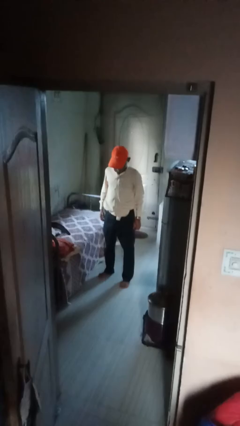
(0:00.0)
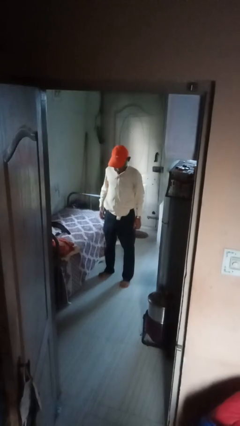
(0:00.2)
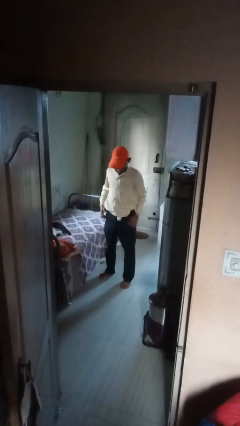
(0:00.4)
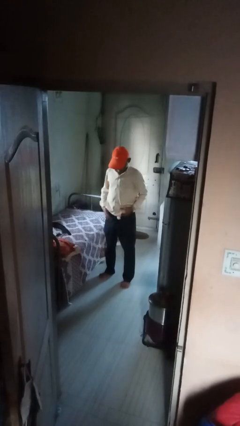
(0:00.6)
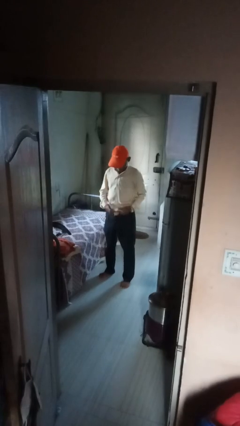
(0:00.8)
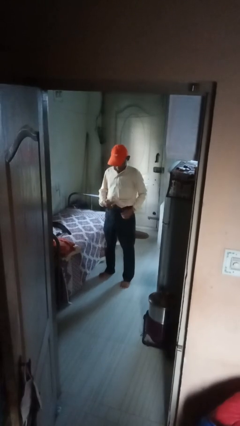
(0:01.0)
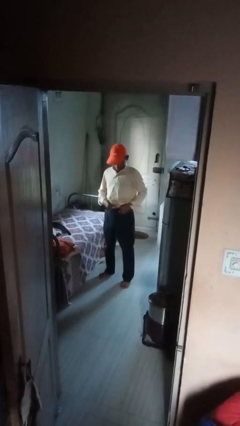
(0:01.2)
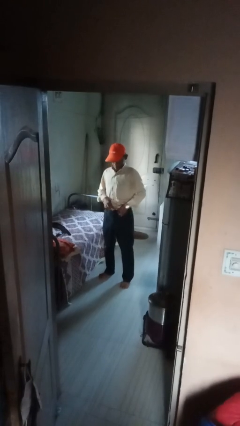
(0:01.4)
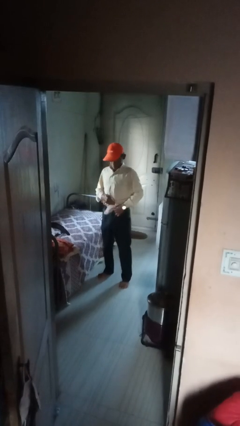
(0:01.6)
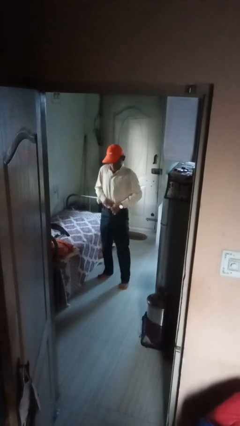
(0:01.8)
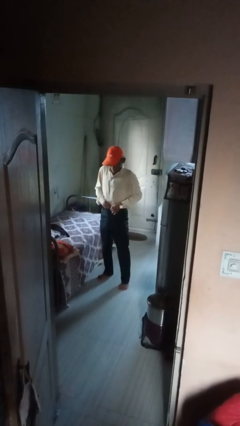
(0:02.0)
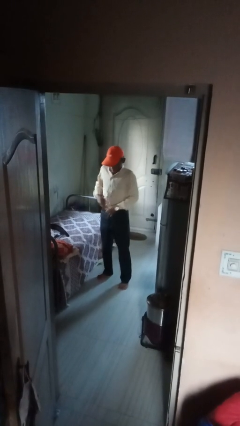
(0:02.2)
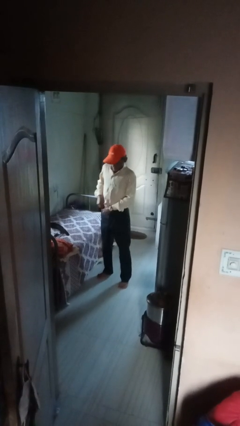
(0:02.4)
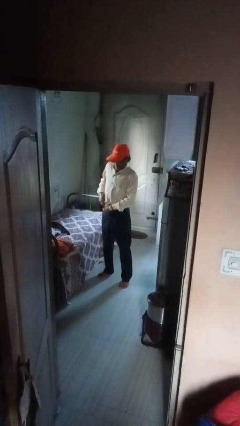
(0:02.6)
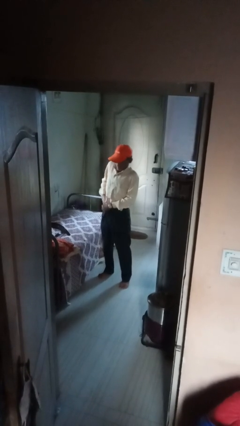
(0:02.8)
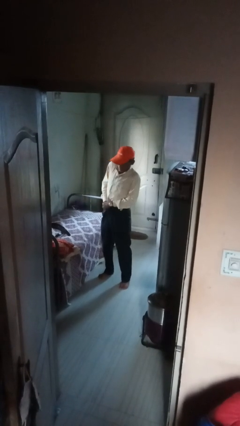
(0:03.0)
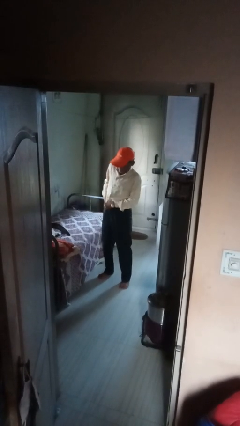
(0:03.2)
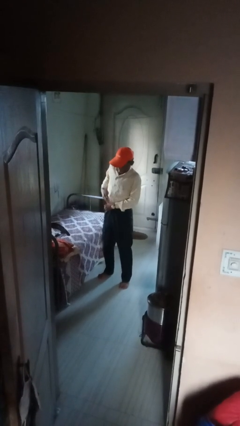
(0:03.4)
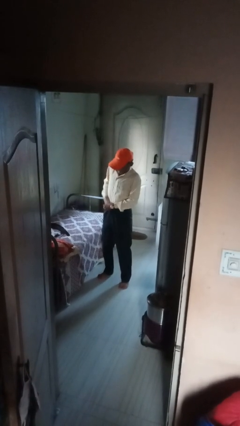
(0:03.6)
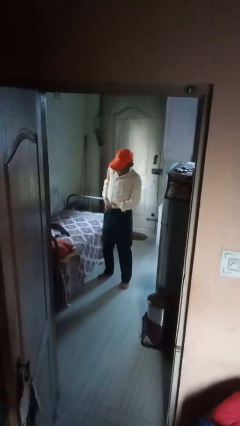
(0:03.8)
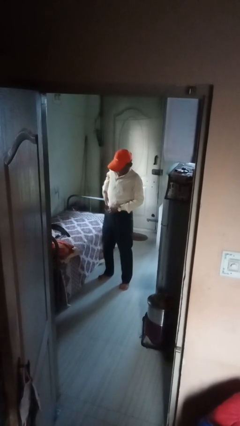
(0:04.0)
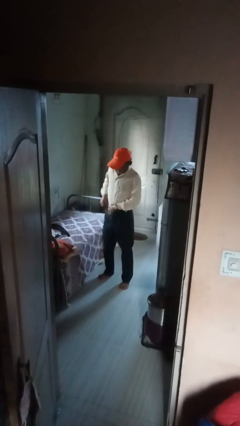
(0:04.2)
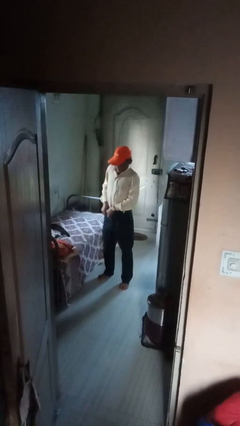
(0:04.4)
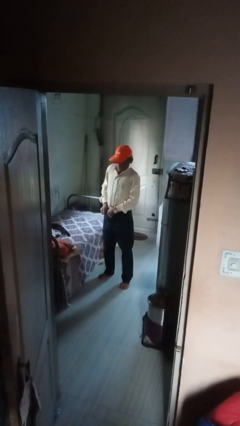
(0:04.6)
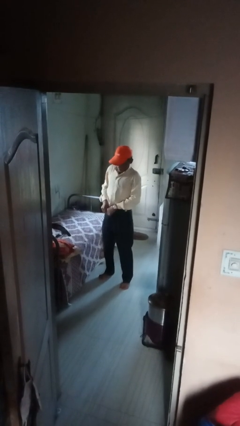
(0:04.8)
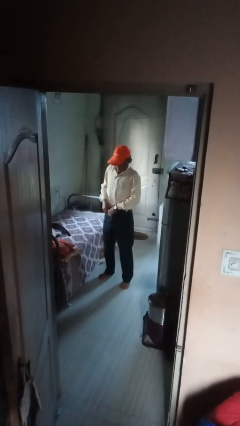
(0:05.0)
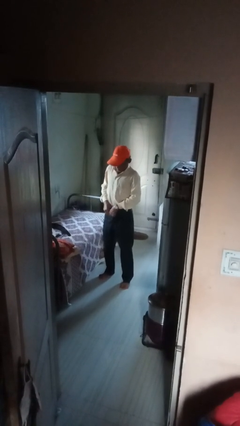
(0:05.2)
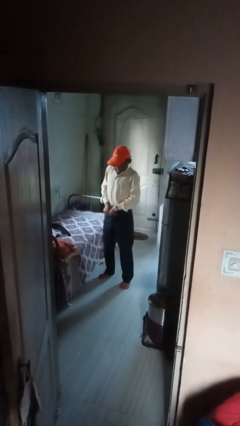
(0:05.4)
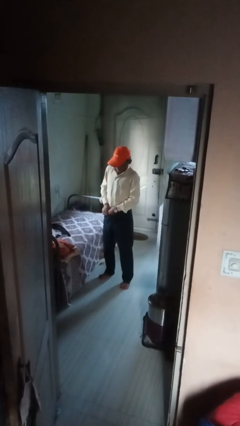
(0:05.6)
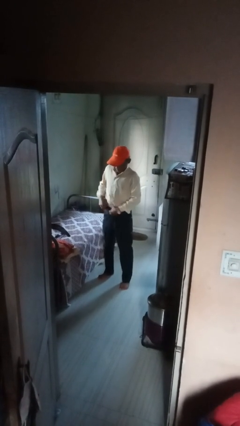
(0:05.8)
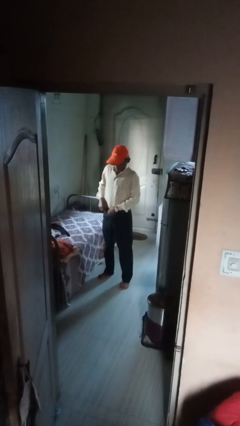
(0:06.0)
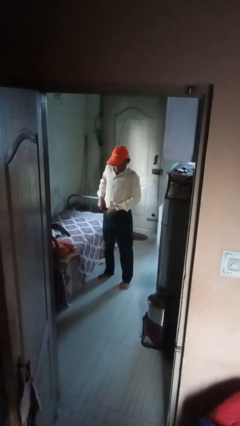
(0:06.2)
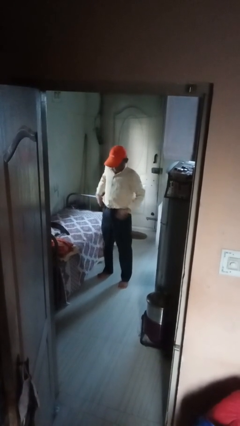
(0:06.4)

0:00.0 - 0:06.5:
person tucks in shirt

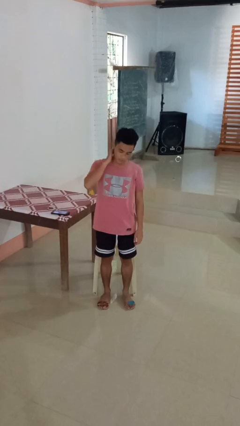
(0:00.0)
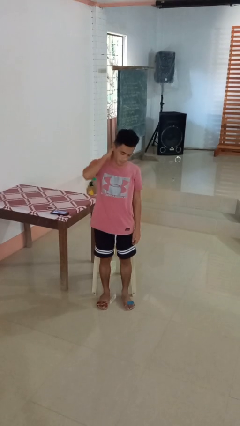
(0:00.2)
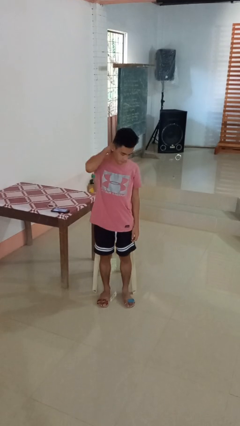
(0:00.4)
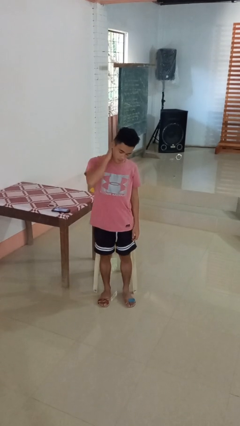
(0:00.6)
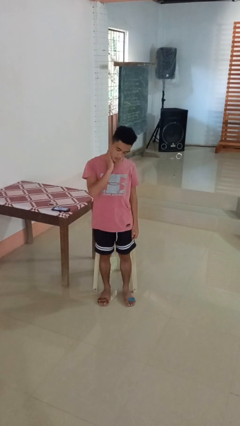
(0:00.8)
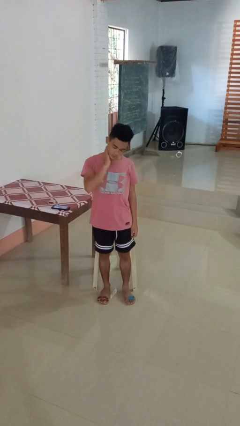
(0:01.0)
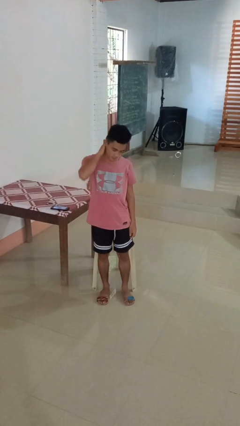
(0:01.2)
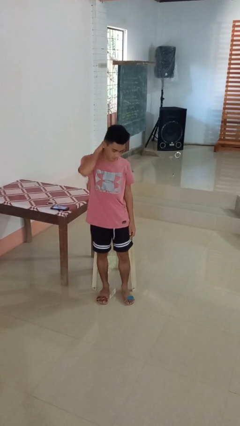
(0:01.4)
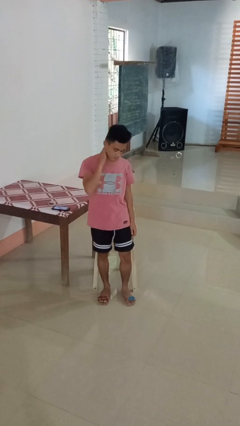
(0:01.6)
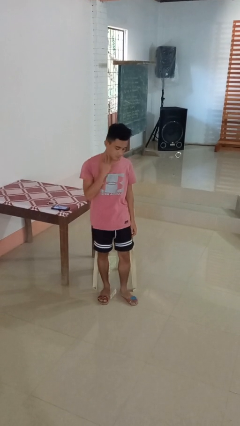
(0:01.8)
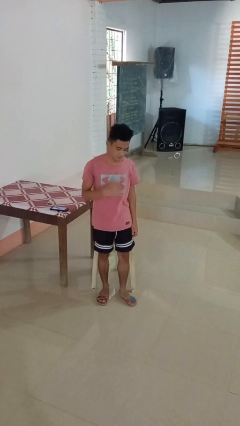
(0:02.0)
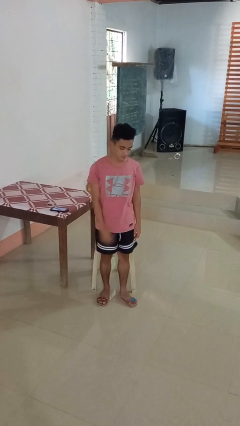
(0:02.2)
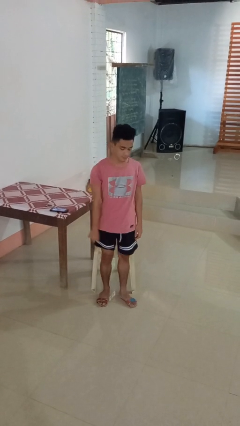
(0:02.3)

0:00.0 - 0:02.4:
person rubs neck

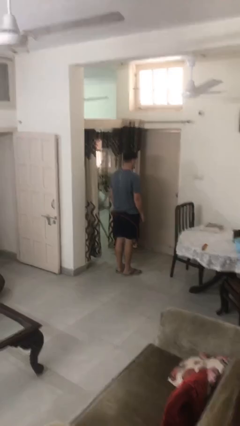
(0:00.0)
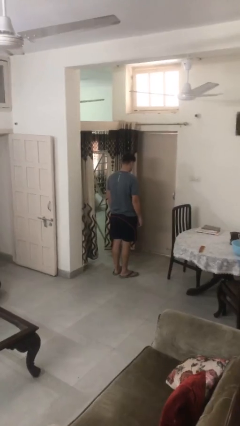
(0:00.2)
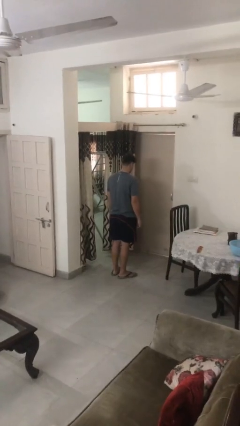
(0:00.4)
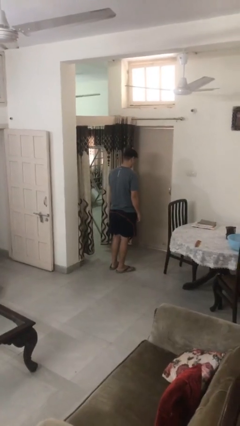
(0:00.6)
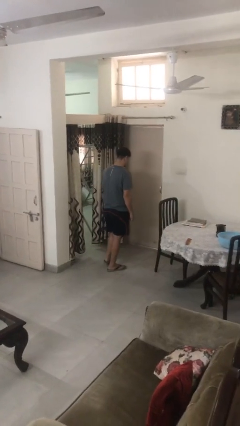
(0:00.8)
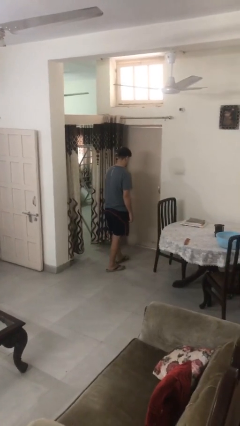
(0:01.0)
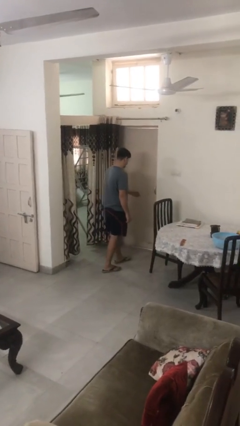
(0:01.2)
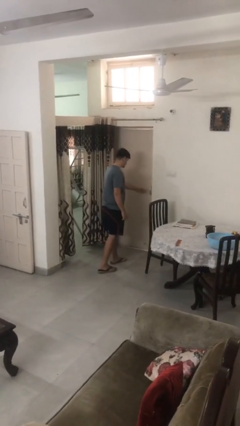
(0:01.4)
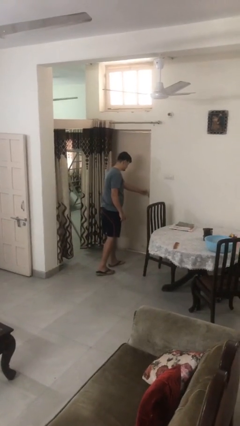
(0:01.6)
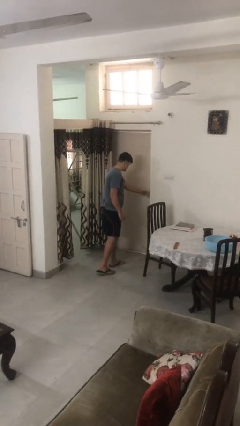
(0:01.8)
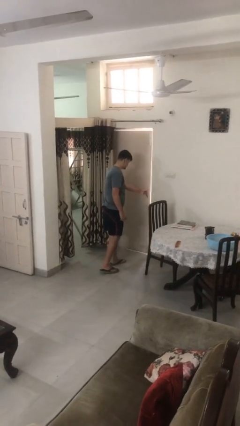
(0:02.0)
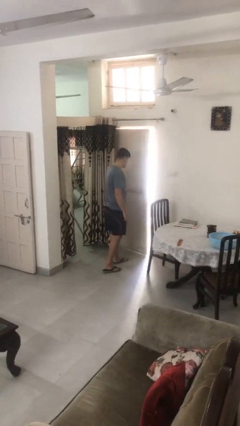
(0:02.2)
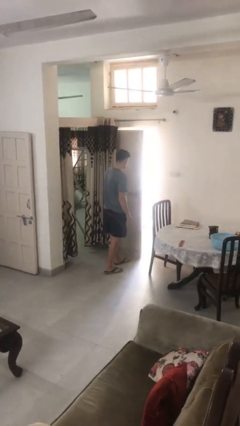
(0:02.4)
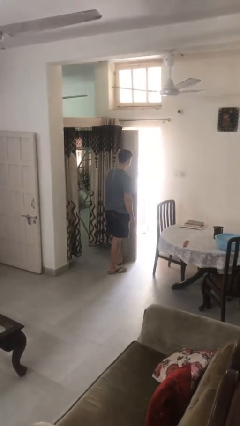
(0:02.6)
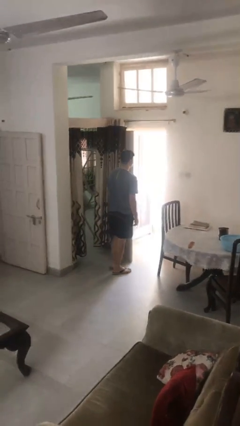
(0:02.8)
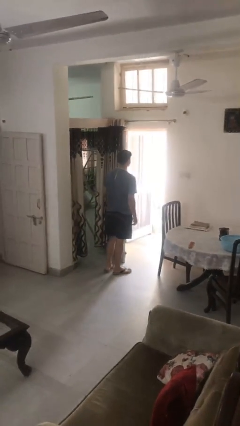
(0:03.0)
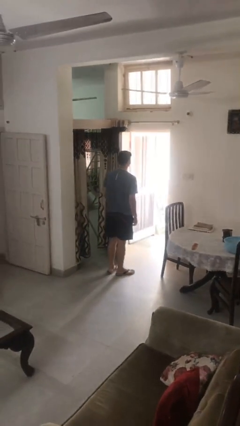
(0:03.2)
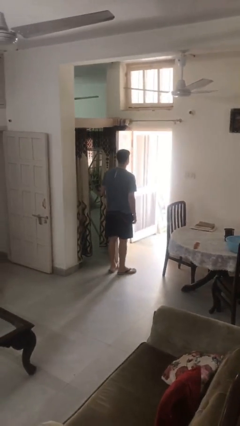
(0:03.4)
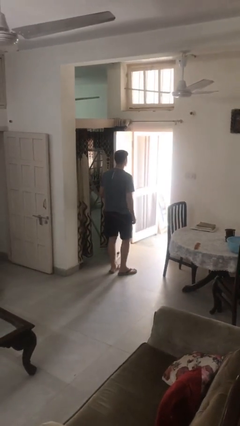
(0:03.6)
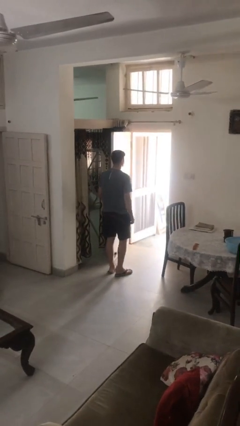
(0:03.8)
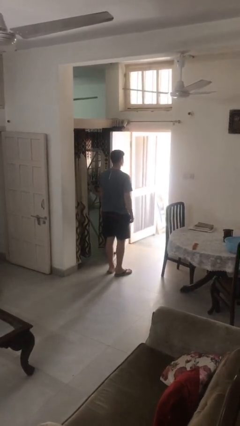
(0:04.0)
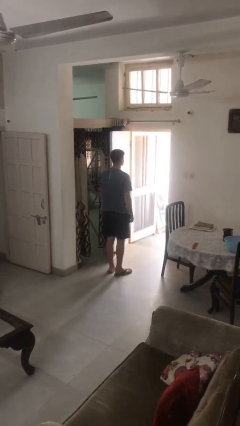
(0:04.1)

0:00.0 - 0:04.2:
person opens facility door

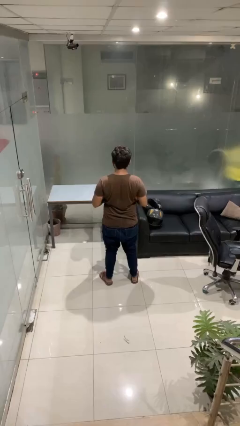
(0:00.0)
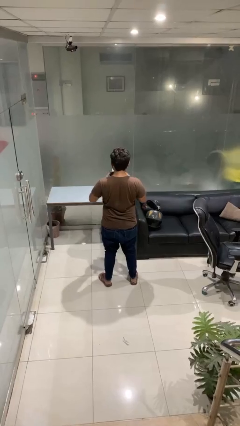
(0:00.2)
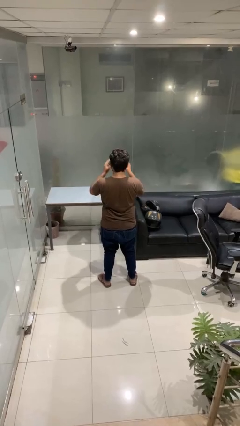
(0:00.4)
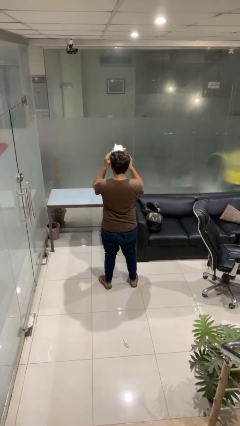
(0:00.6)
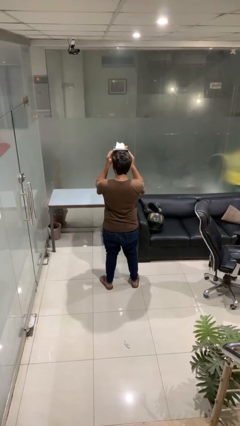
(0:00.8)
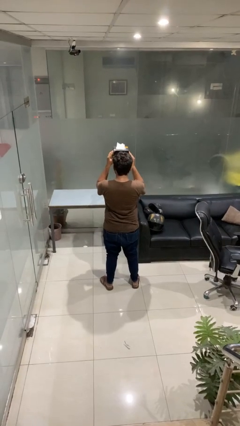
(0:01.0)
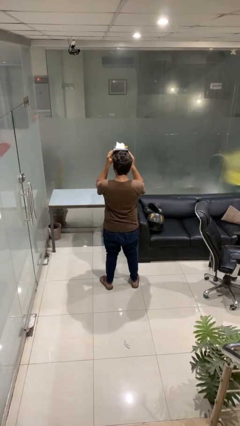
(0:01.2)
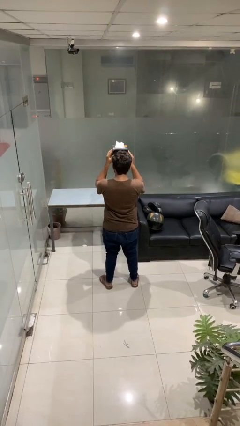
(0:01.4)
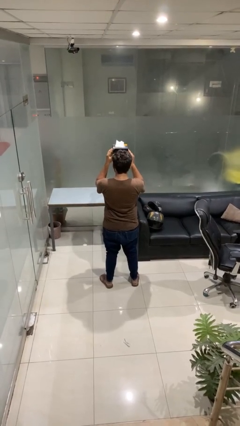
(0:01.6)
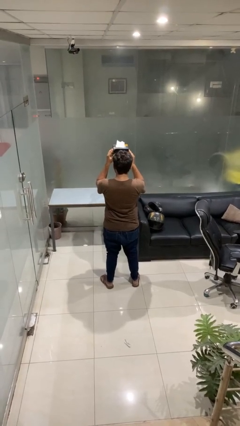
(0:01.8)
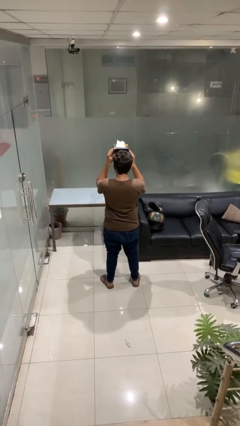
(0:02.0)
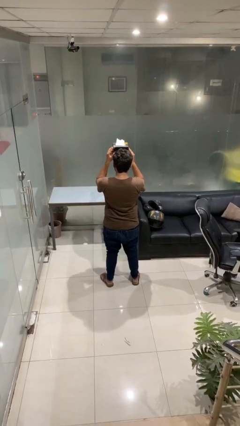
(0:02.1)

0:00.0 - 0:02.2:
person holds object above head

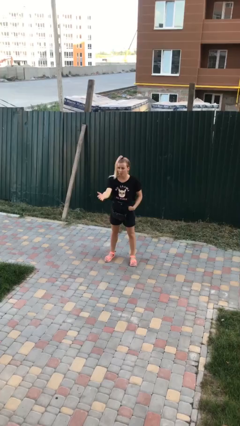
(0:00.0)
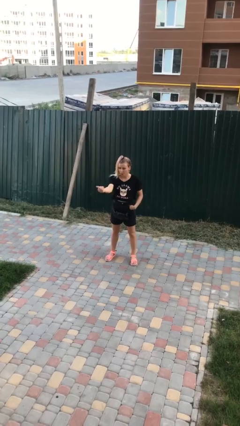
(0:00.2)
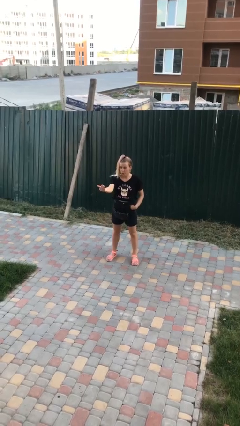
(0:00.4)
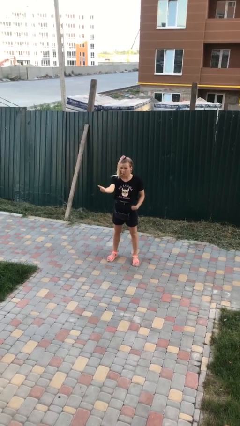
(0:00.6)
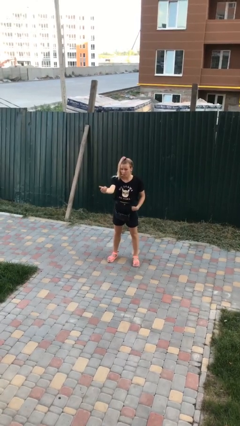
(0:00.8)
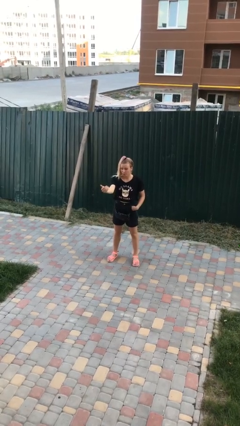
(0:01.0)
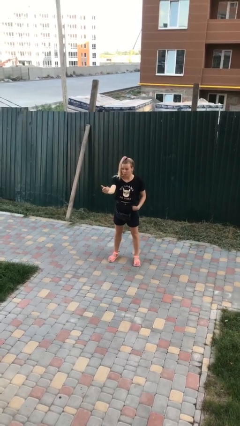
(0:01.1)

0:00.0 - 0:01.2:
person gestures come here

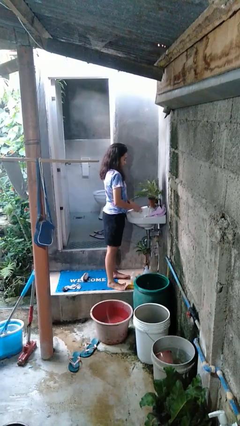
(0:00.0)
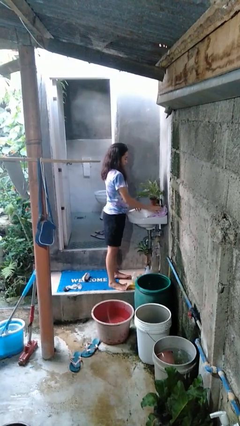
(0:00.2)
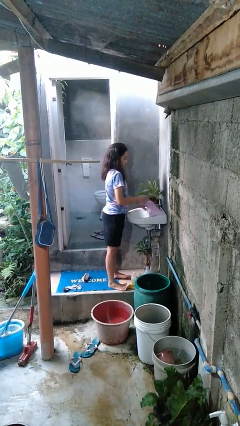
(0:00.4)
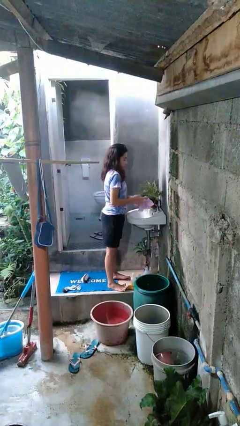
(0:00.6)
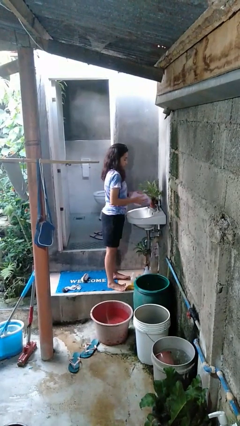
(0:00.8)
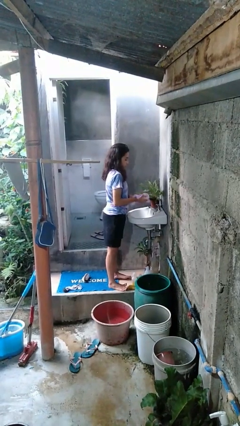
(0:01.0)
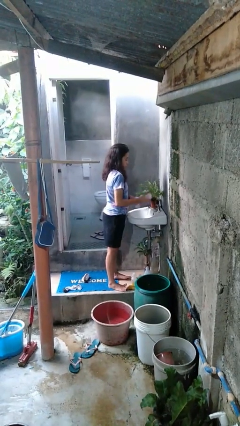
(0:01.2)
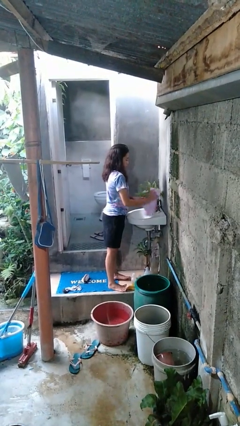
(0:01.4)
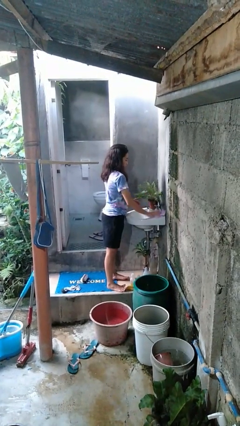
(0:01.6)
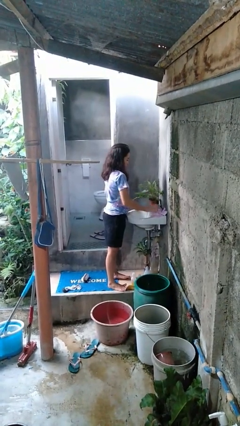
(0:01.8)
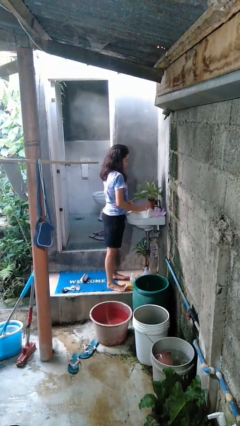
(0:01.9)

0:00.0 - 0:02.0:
person dries hands with towel
